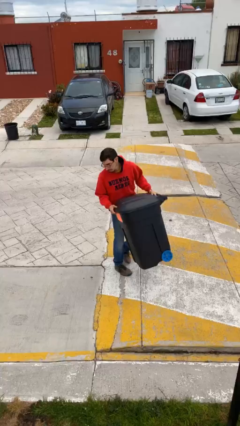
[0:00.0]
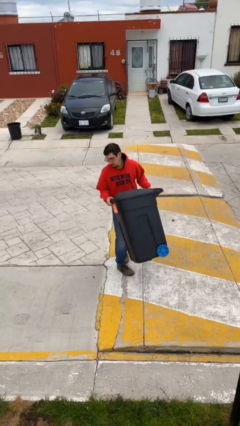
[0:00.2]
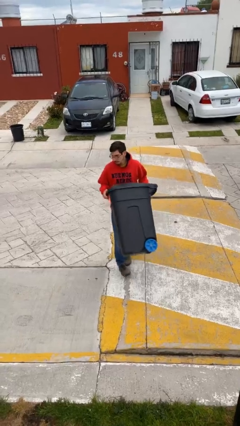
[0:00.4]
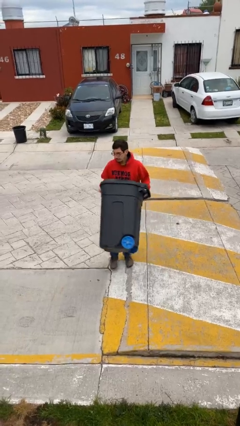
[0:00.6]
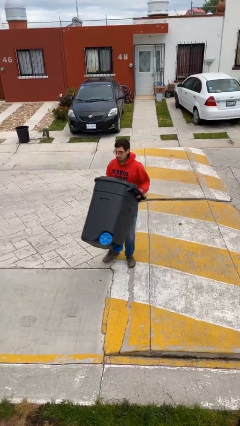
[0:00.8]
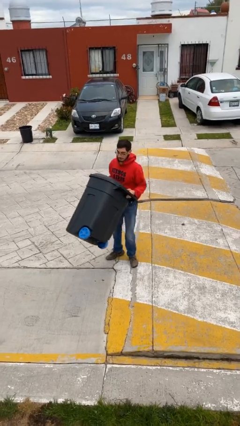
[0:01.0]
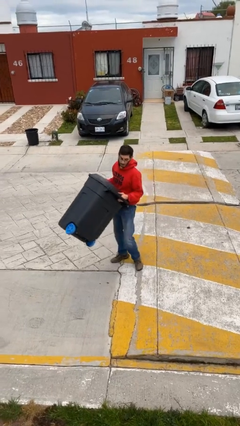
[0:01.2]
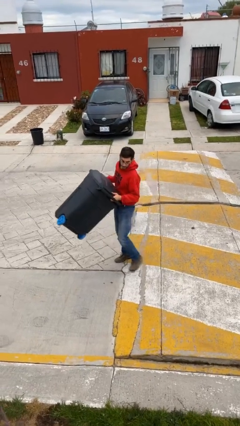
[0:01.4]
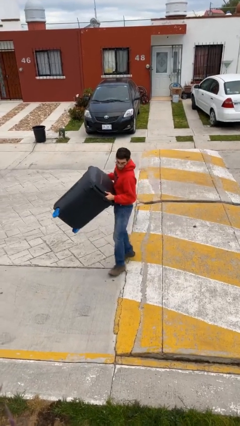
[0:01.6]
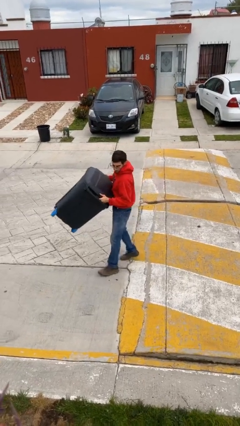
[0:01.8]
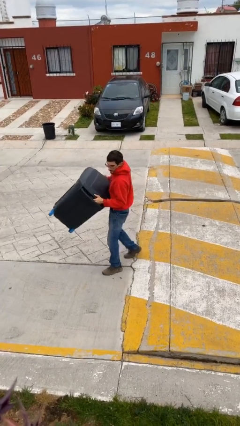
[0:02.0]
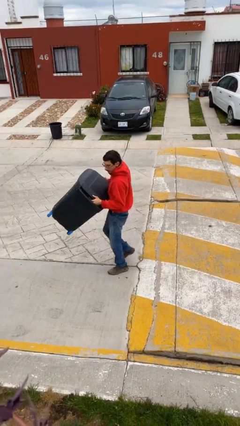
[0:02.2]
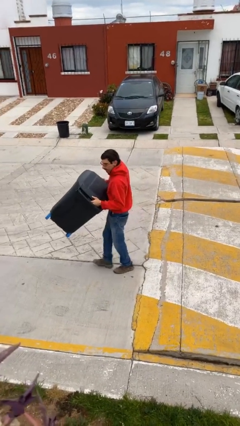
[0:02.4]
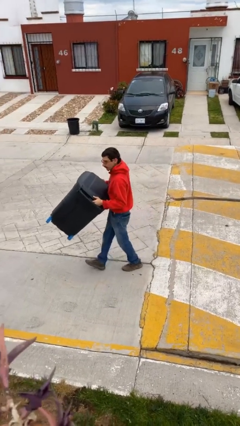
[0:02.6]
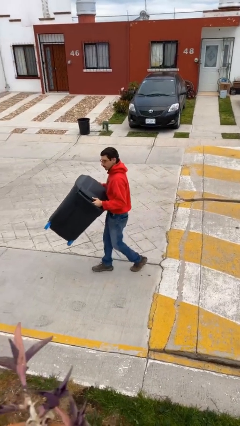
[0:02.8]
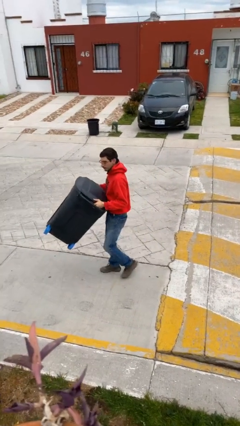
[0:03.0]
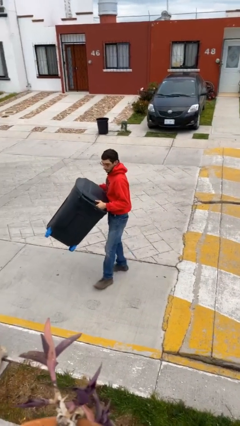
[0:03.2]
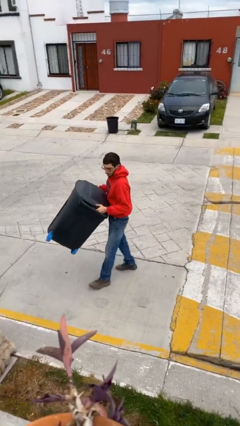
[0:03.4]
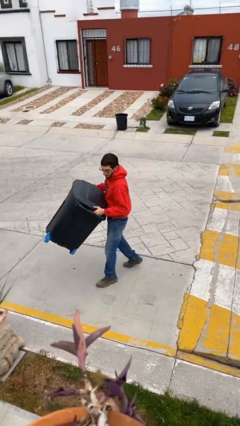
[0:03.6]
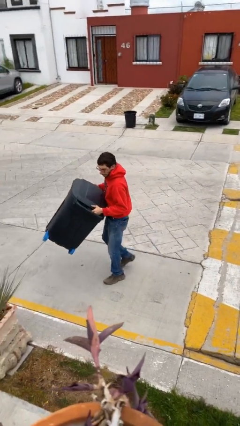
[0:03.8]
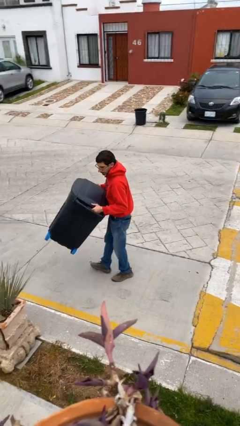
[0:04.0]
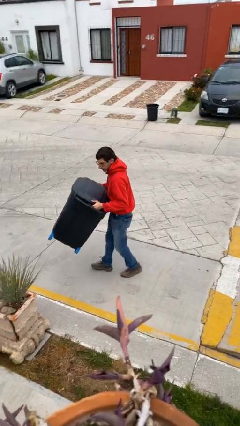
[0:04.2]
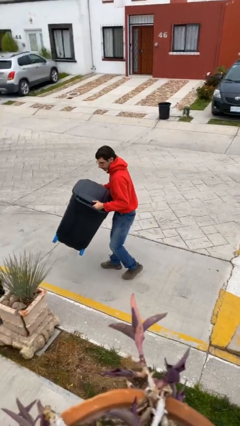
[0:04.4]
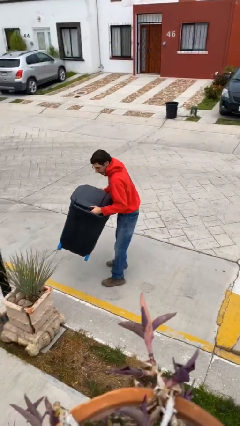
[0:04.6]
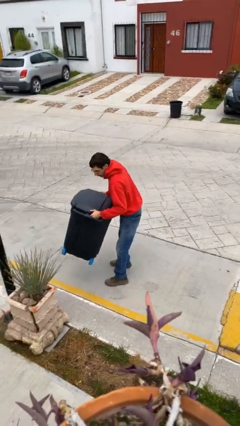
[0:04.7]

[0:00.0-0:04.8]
person carries heavy object

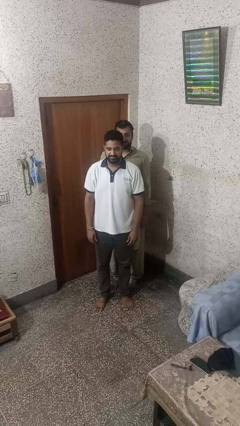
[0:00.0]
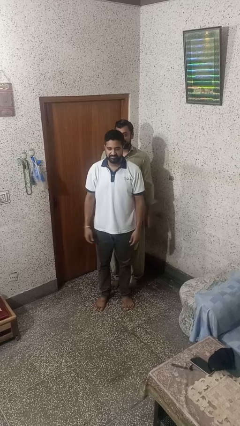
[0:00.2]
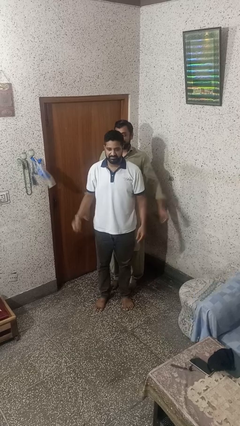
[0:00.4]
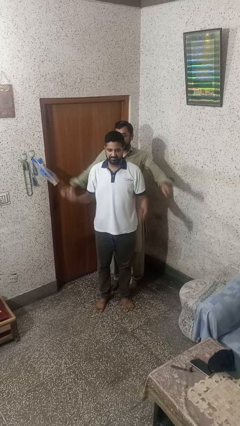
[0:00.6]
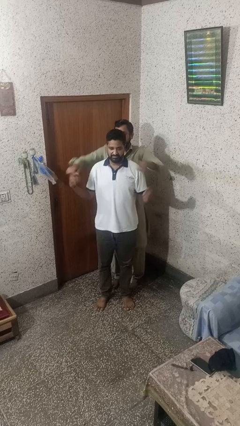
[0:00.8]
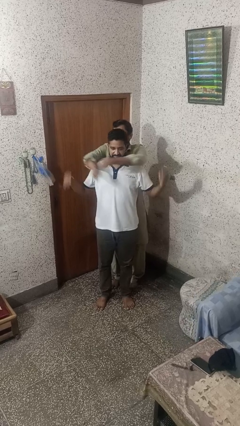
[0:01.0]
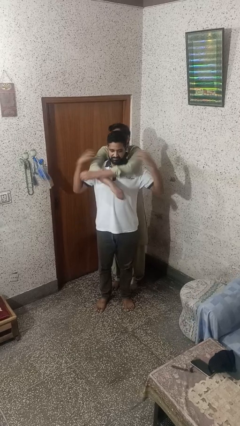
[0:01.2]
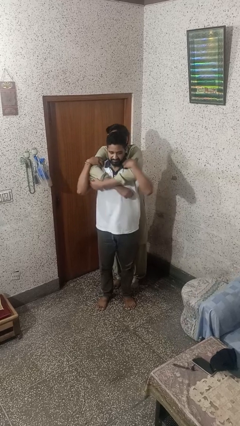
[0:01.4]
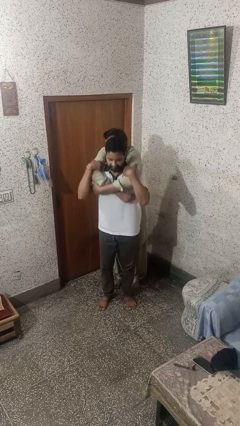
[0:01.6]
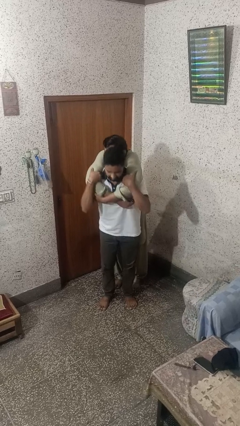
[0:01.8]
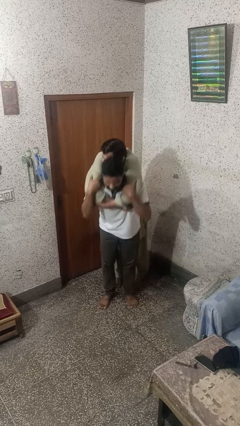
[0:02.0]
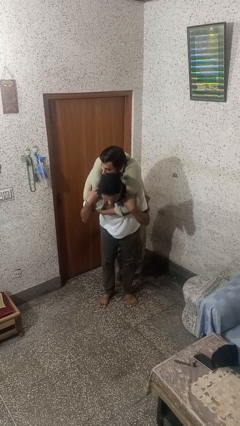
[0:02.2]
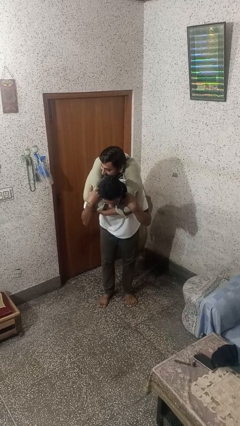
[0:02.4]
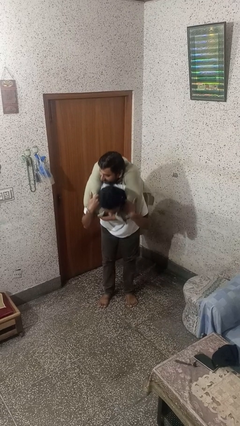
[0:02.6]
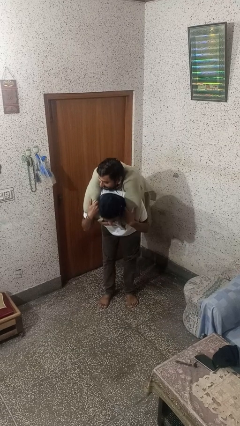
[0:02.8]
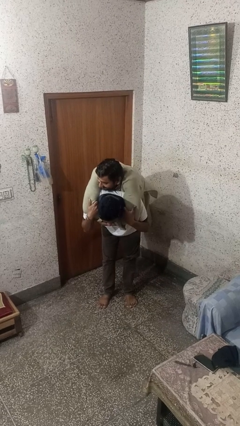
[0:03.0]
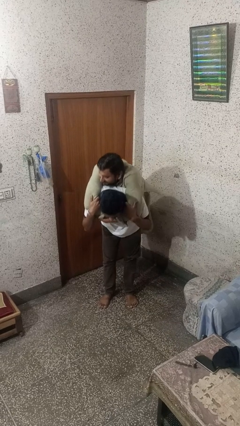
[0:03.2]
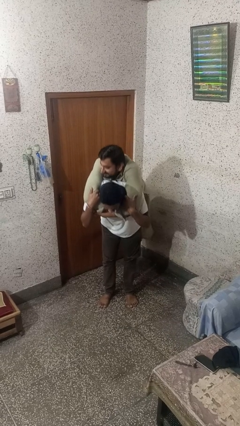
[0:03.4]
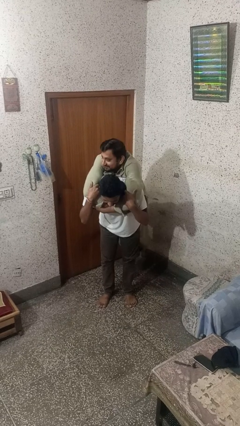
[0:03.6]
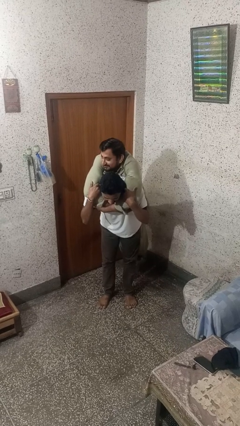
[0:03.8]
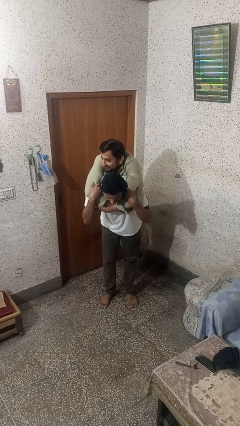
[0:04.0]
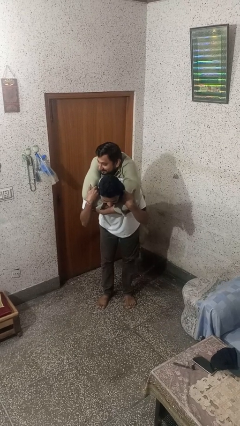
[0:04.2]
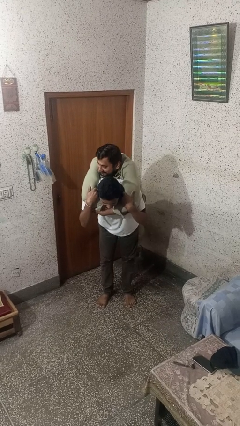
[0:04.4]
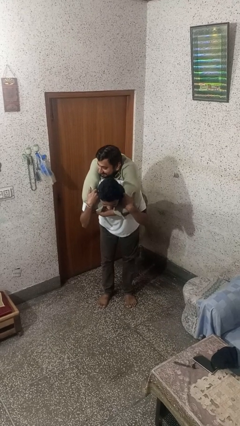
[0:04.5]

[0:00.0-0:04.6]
person carries person on back

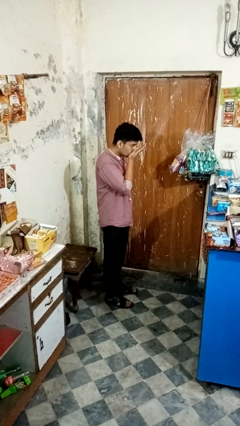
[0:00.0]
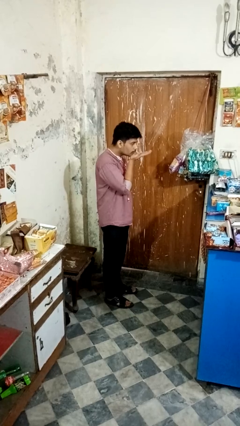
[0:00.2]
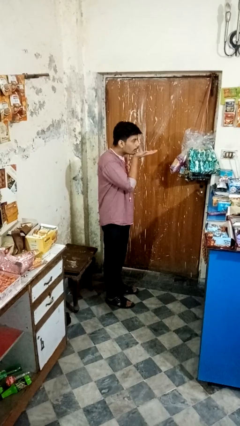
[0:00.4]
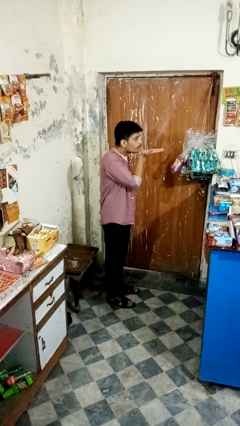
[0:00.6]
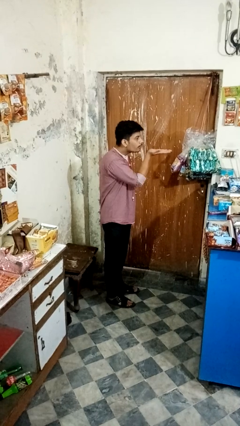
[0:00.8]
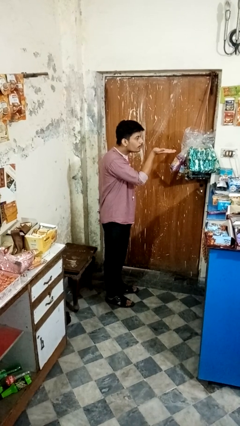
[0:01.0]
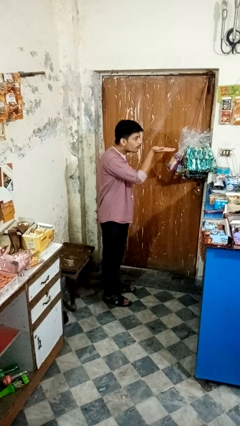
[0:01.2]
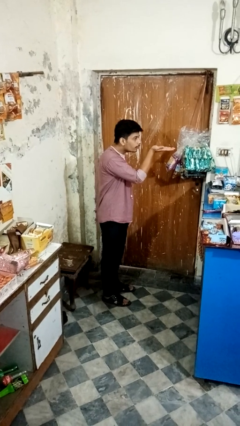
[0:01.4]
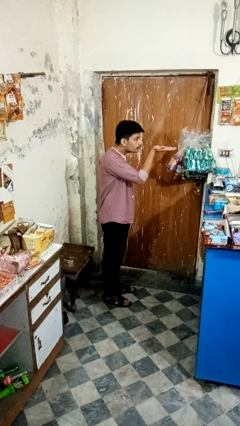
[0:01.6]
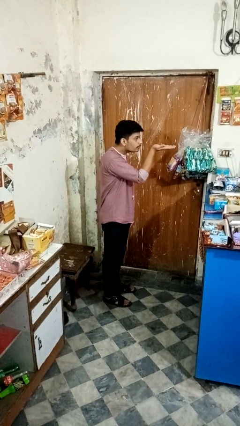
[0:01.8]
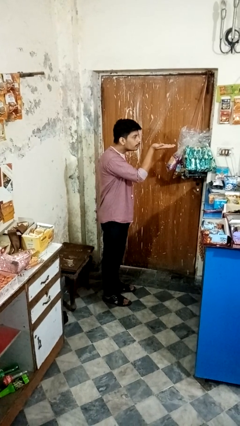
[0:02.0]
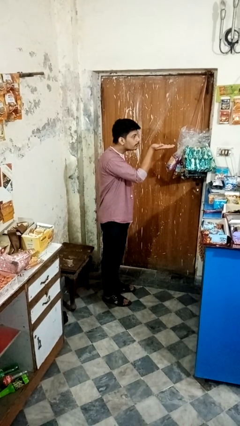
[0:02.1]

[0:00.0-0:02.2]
person gestures blow kiss

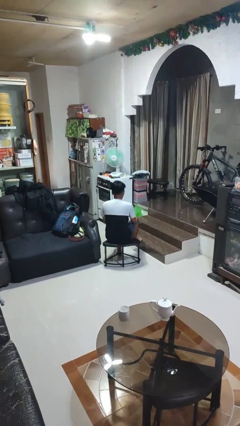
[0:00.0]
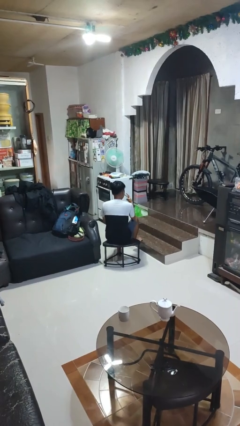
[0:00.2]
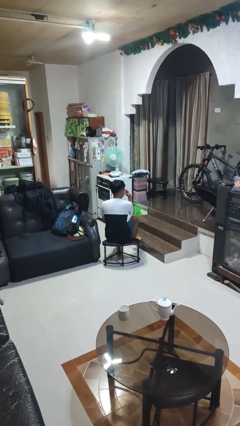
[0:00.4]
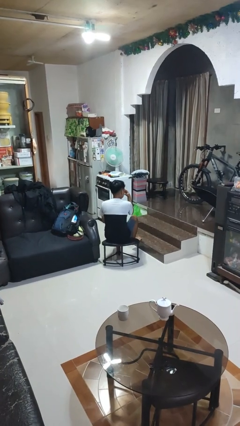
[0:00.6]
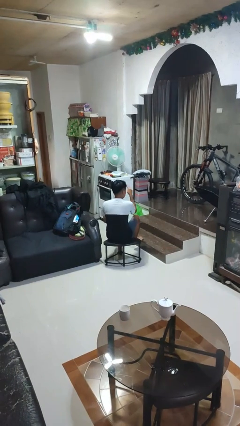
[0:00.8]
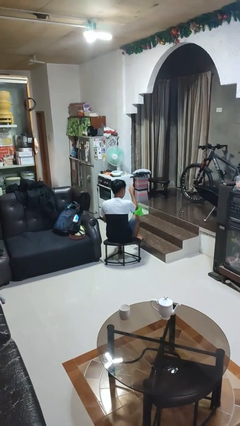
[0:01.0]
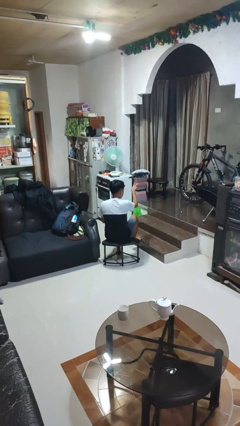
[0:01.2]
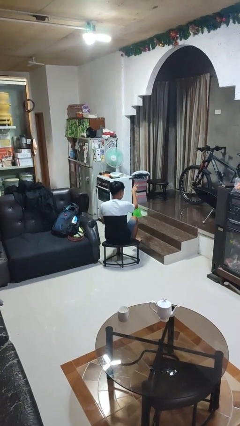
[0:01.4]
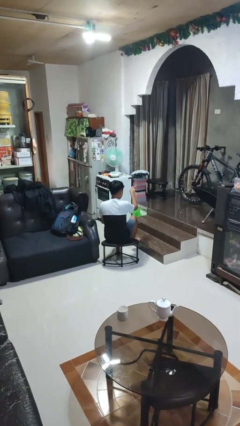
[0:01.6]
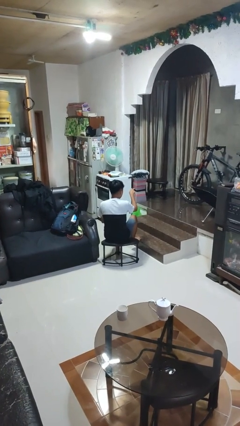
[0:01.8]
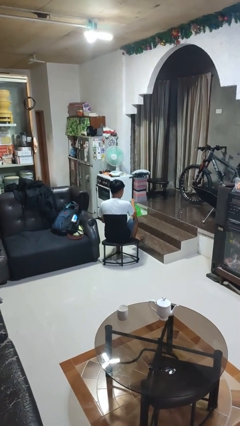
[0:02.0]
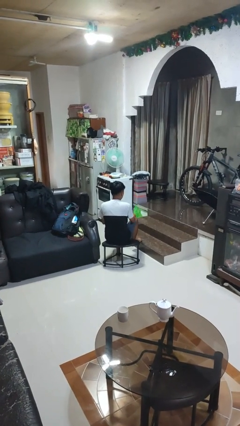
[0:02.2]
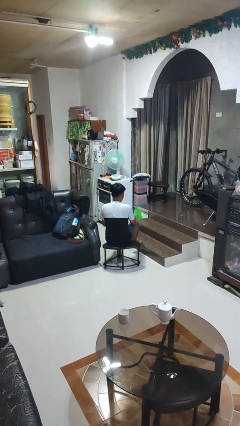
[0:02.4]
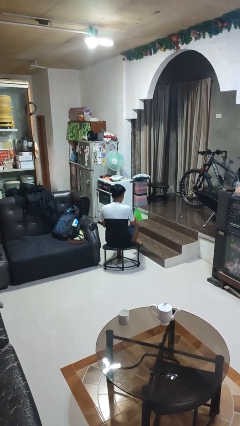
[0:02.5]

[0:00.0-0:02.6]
person gestures watch closely

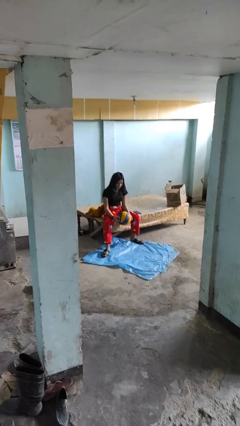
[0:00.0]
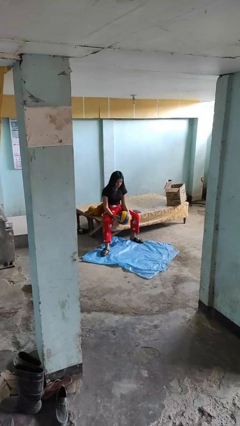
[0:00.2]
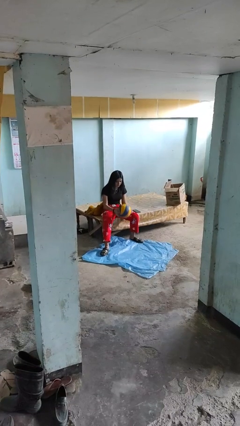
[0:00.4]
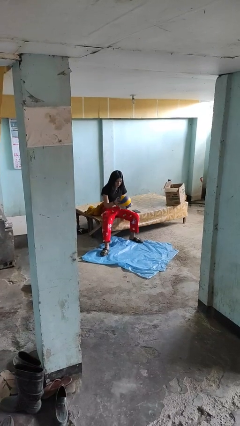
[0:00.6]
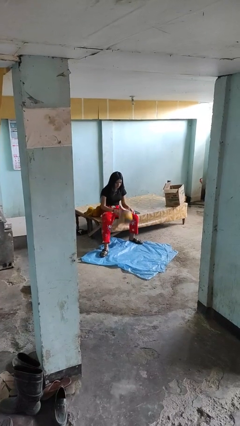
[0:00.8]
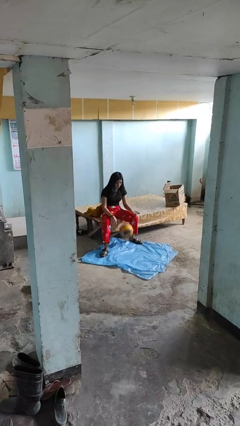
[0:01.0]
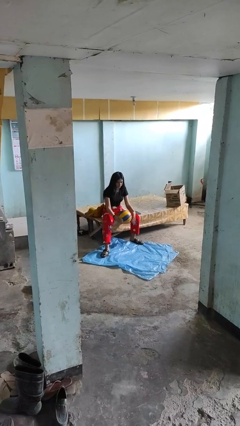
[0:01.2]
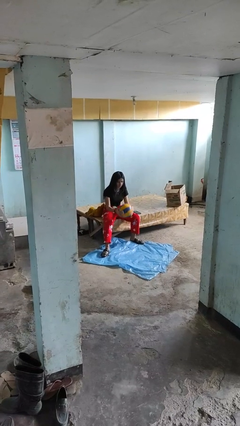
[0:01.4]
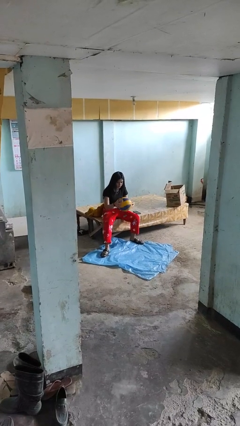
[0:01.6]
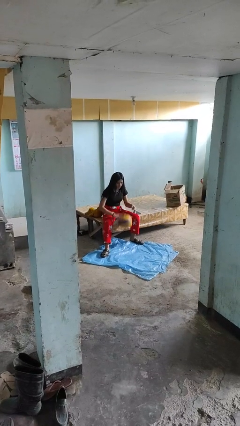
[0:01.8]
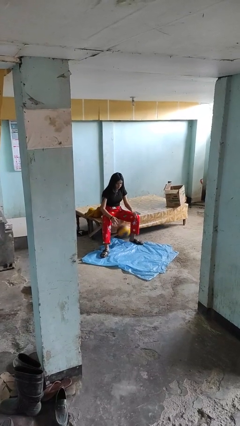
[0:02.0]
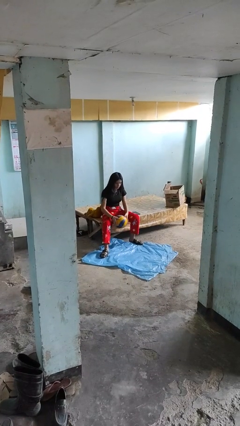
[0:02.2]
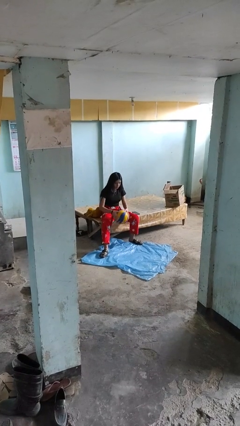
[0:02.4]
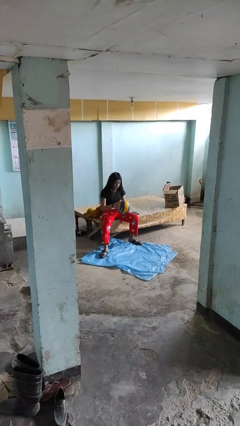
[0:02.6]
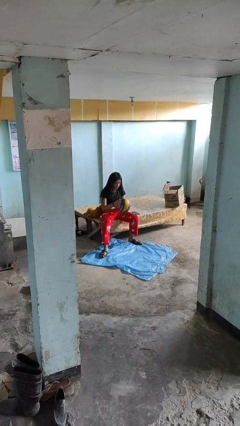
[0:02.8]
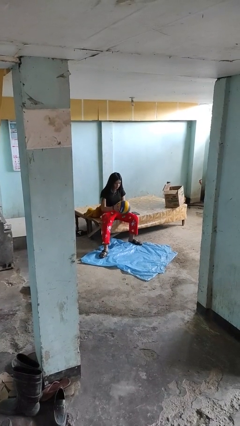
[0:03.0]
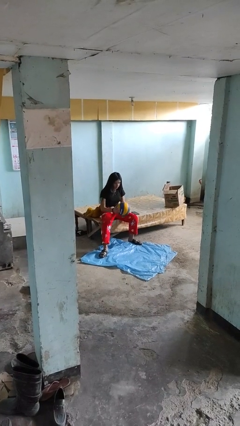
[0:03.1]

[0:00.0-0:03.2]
person bounces ball on floor

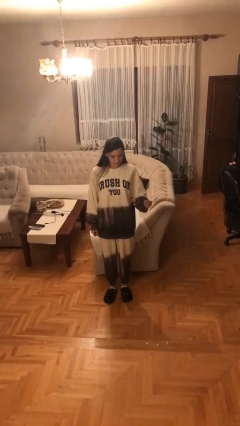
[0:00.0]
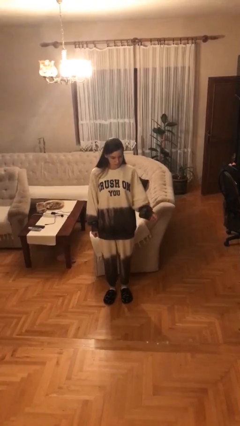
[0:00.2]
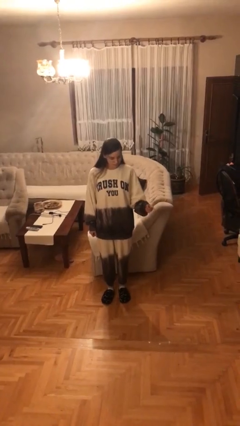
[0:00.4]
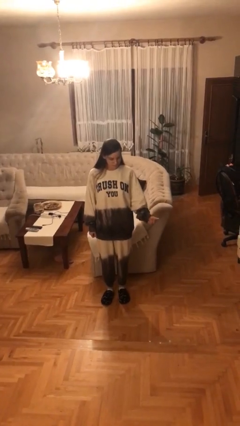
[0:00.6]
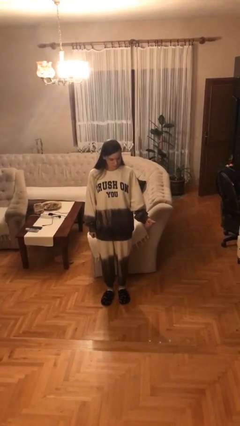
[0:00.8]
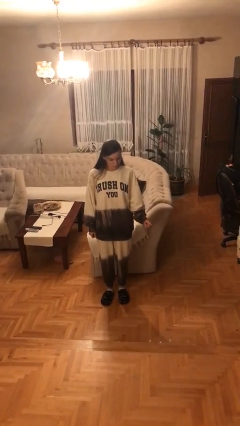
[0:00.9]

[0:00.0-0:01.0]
person snaps fingers
